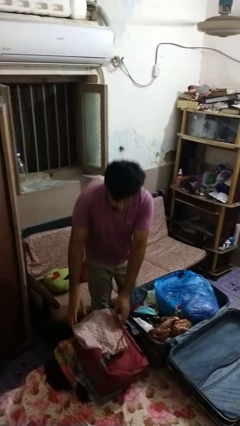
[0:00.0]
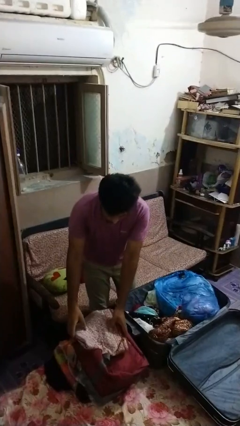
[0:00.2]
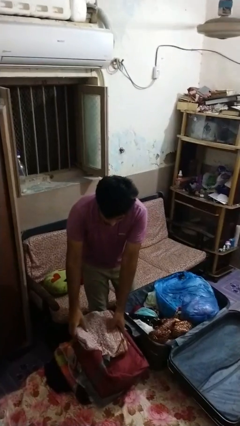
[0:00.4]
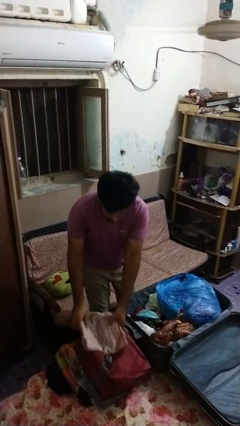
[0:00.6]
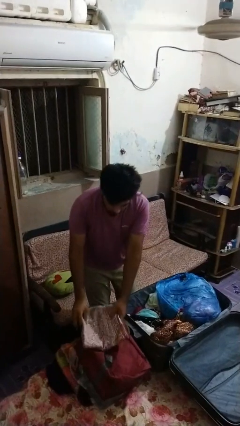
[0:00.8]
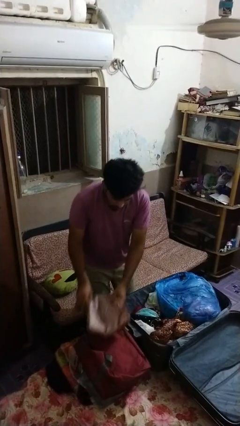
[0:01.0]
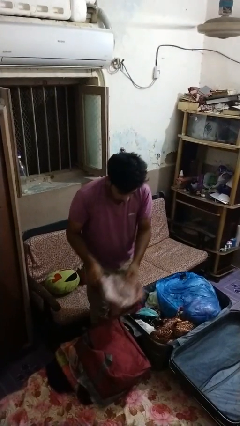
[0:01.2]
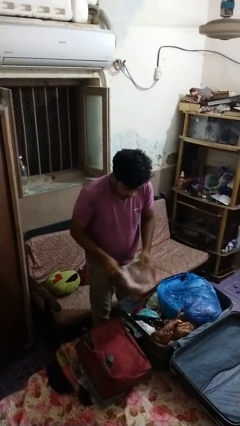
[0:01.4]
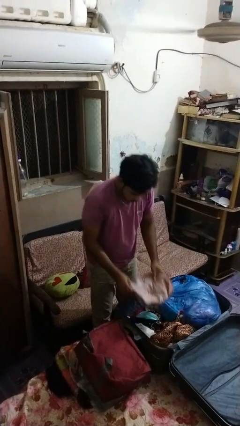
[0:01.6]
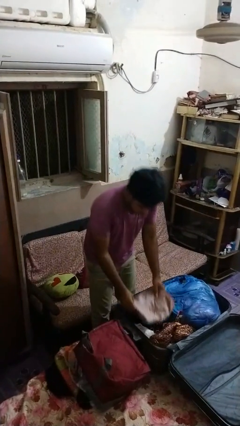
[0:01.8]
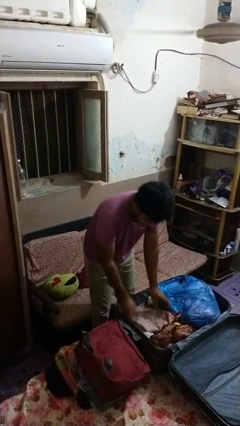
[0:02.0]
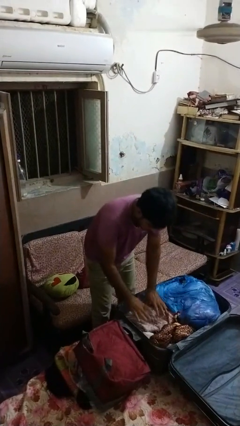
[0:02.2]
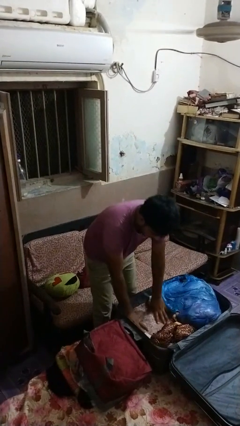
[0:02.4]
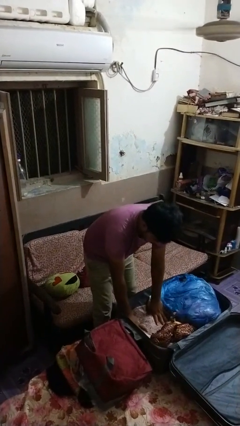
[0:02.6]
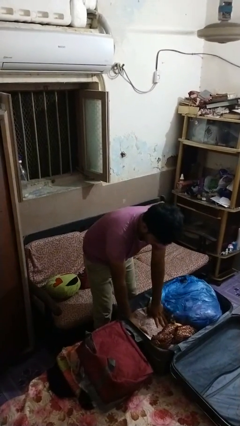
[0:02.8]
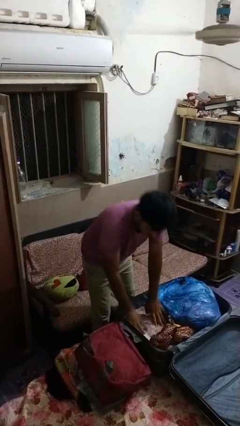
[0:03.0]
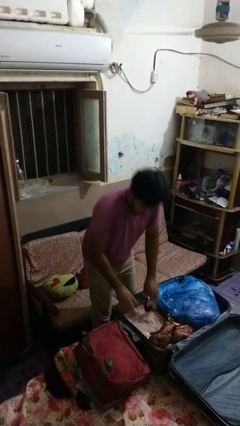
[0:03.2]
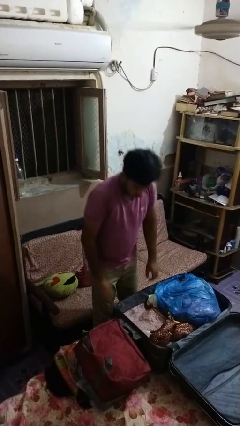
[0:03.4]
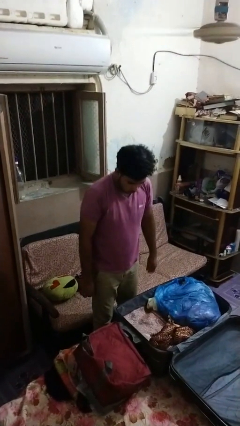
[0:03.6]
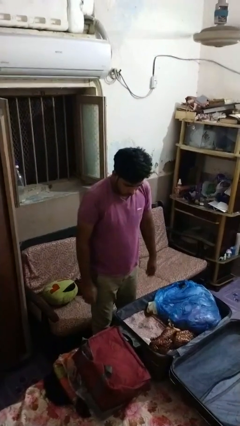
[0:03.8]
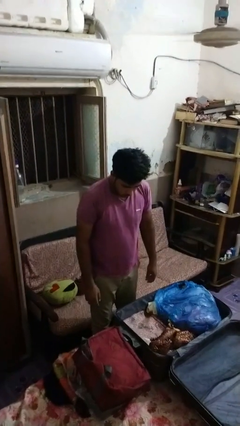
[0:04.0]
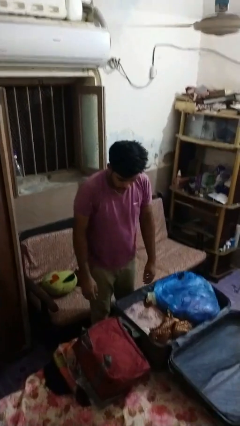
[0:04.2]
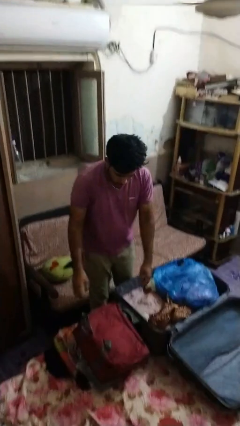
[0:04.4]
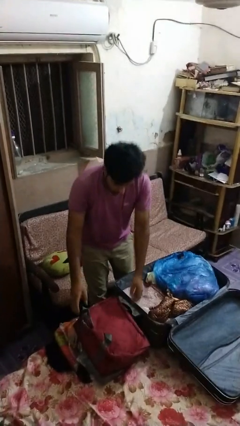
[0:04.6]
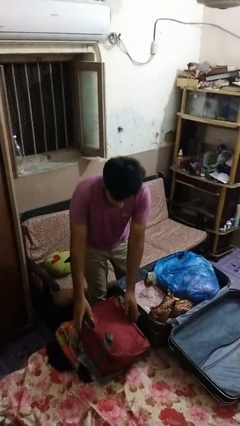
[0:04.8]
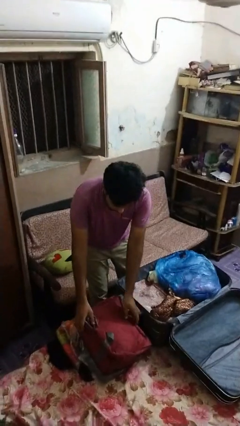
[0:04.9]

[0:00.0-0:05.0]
person loads clothes into suitcase

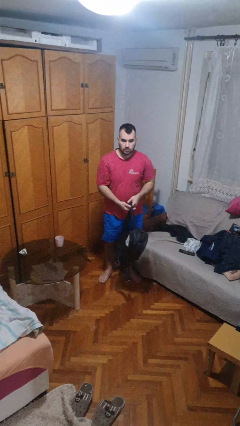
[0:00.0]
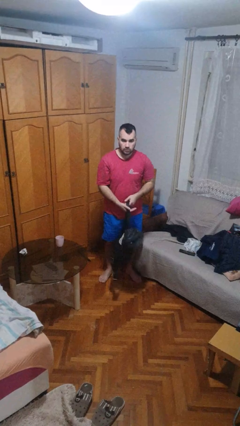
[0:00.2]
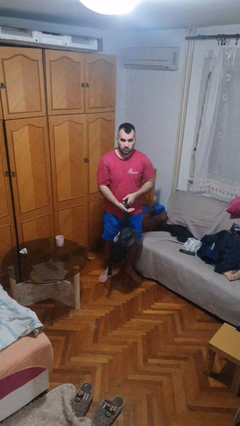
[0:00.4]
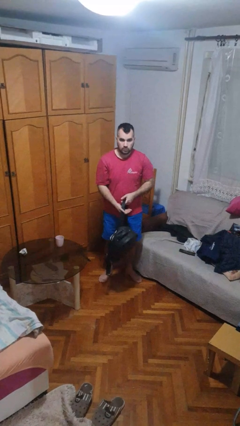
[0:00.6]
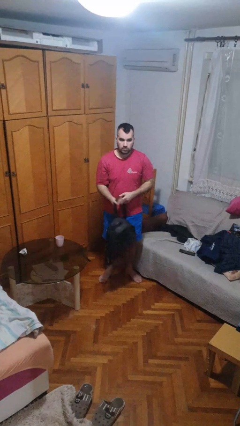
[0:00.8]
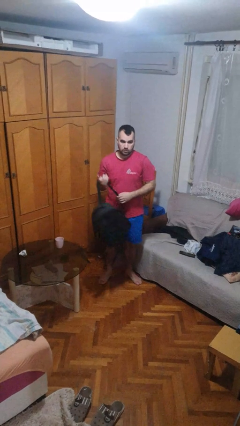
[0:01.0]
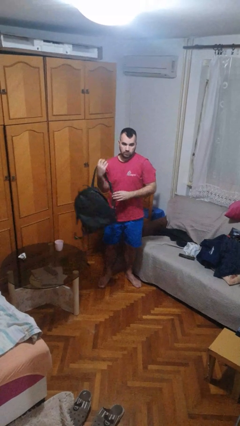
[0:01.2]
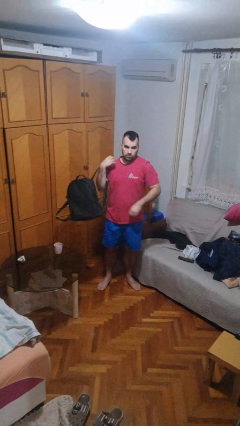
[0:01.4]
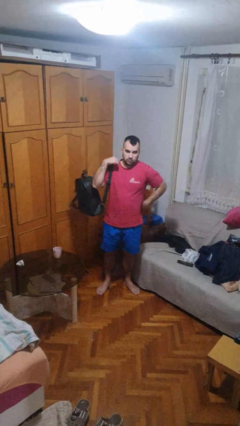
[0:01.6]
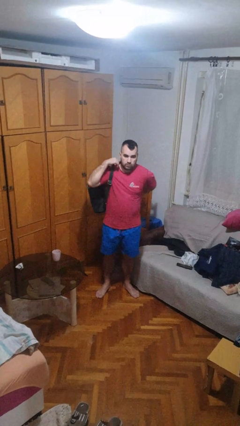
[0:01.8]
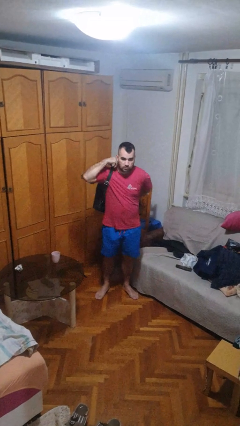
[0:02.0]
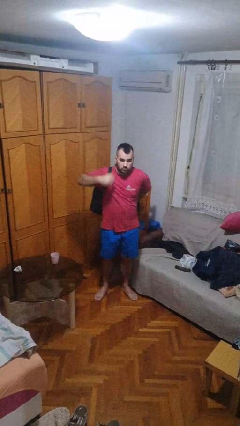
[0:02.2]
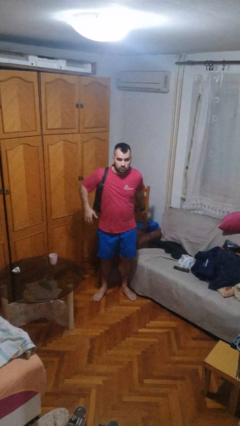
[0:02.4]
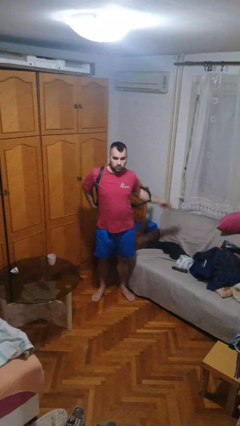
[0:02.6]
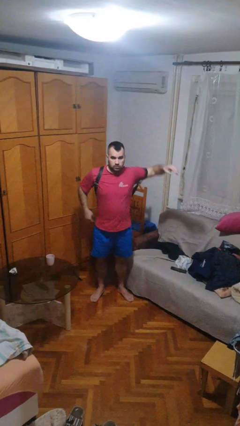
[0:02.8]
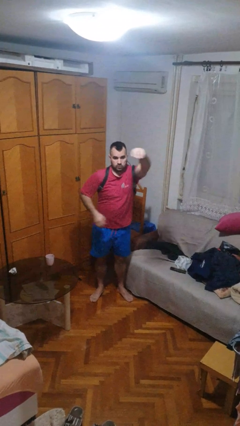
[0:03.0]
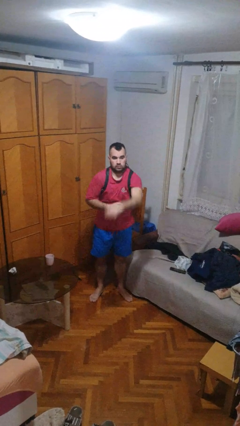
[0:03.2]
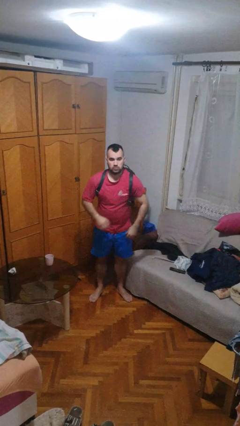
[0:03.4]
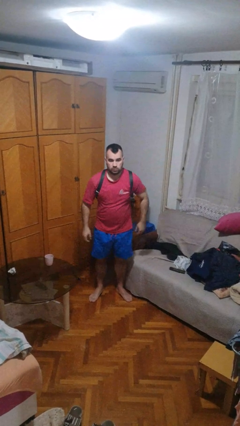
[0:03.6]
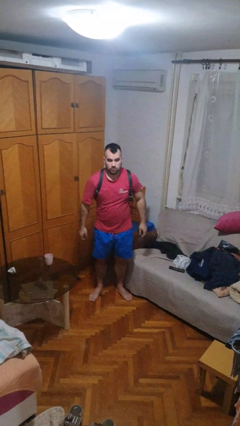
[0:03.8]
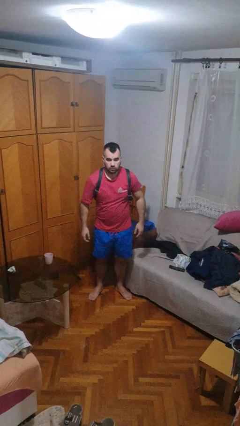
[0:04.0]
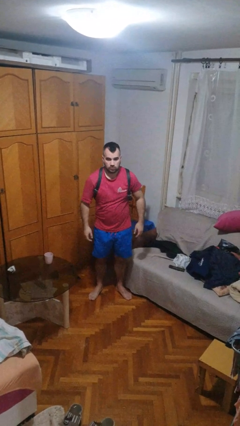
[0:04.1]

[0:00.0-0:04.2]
person puts on backpack

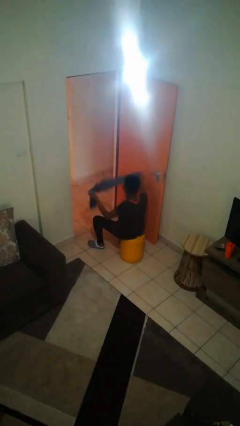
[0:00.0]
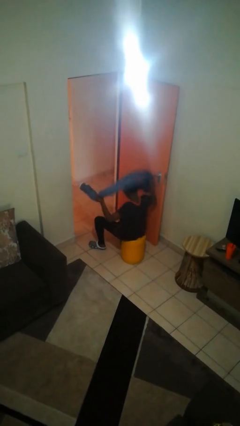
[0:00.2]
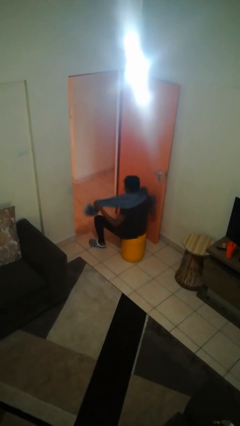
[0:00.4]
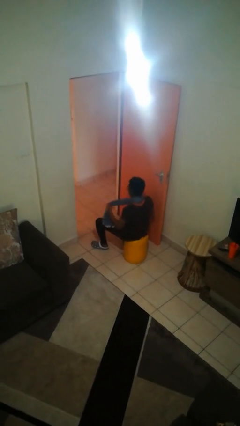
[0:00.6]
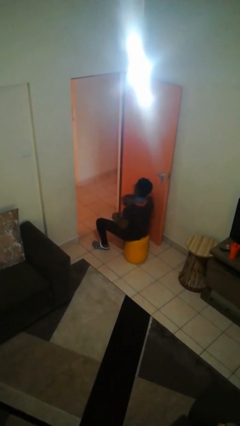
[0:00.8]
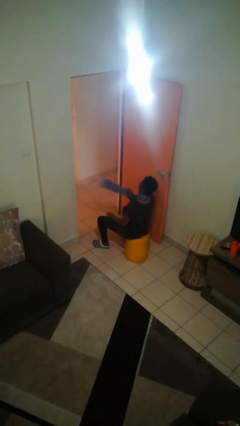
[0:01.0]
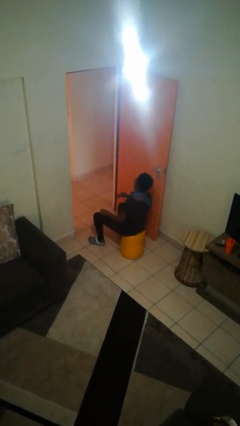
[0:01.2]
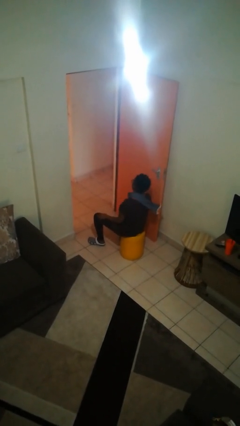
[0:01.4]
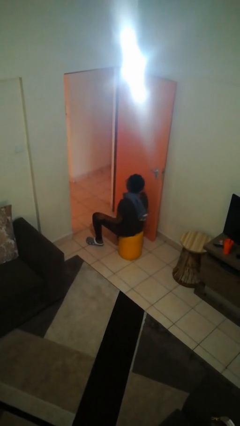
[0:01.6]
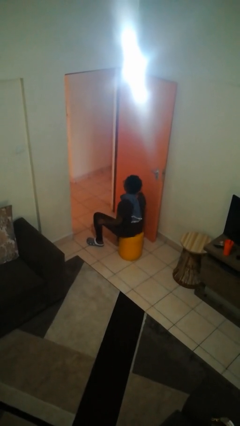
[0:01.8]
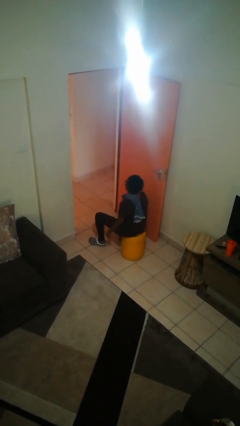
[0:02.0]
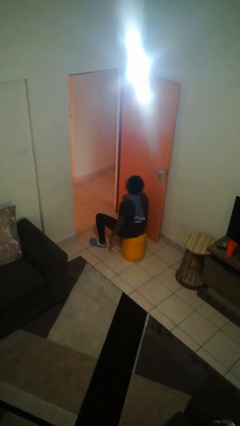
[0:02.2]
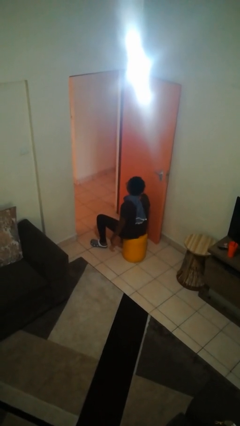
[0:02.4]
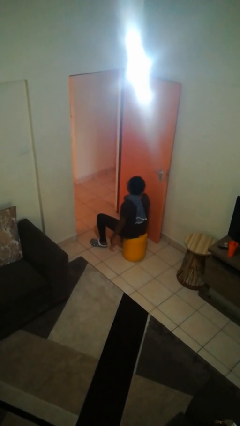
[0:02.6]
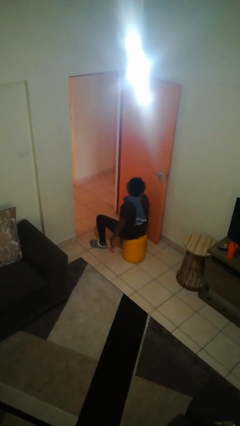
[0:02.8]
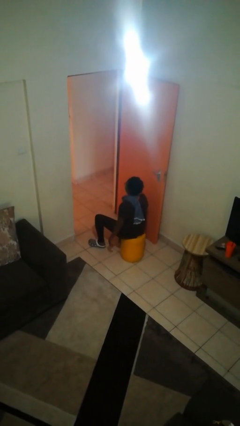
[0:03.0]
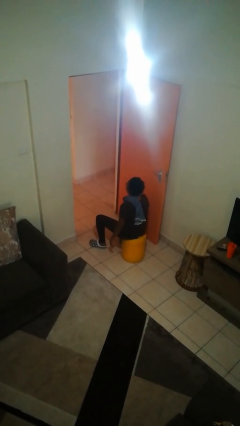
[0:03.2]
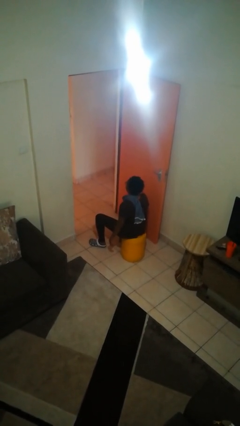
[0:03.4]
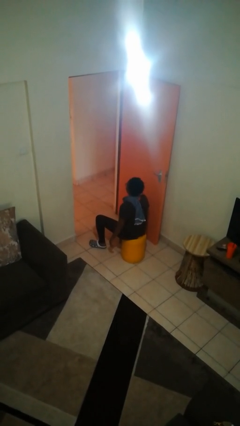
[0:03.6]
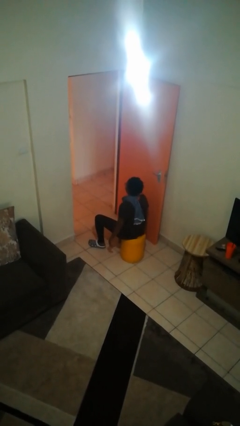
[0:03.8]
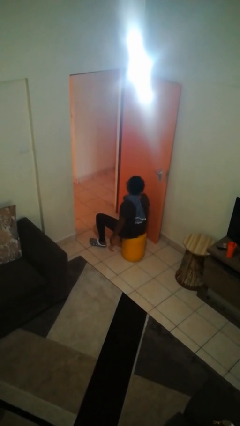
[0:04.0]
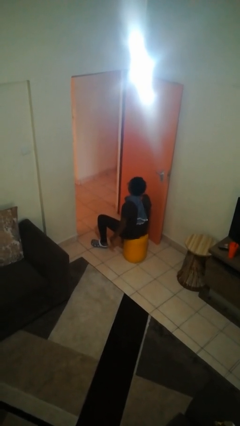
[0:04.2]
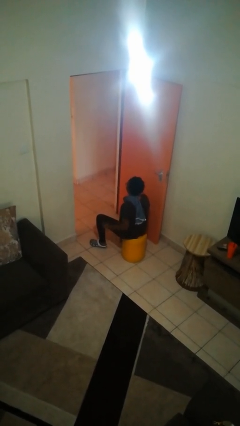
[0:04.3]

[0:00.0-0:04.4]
person puts on scarf

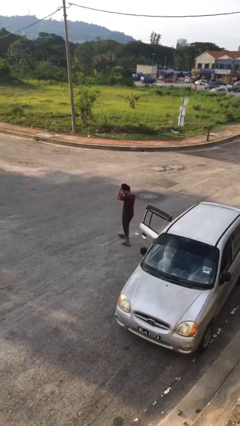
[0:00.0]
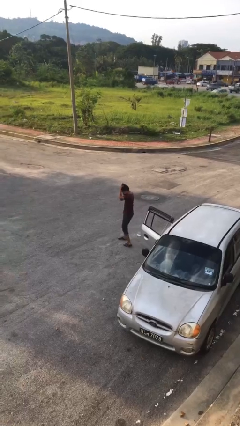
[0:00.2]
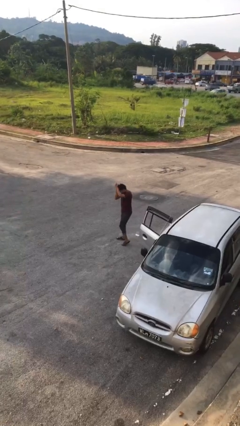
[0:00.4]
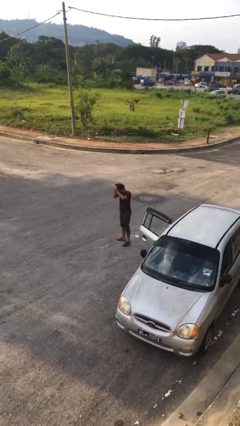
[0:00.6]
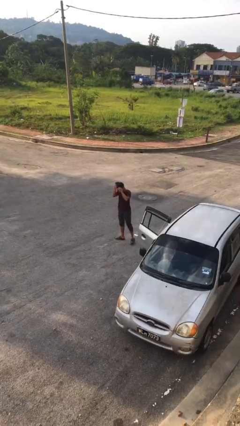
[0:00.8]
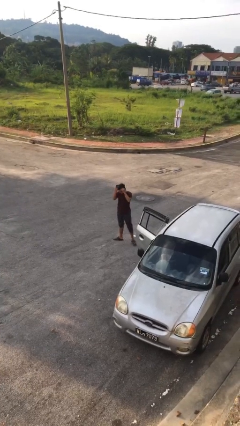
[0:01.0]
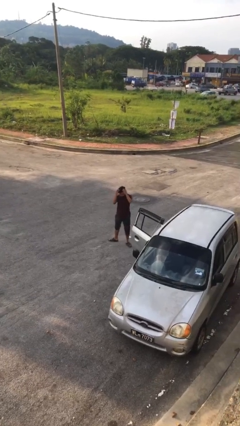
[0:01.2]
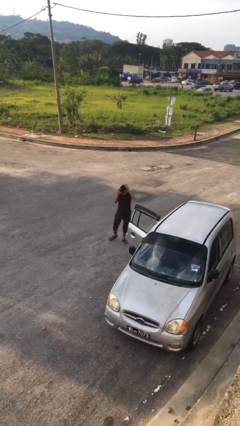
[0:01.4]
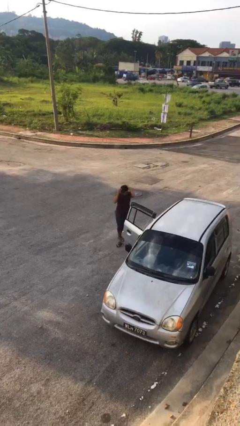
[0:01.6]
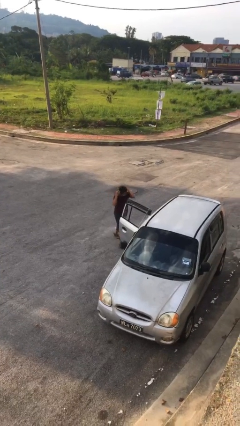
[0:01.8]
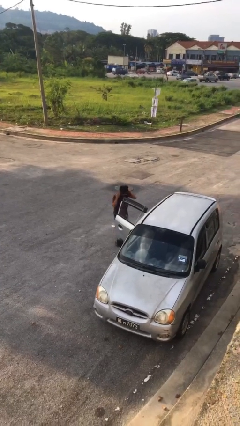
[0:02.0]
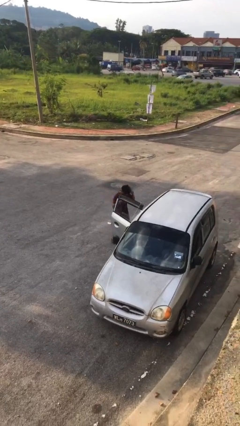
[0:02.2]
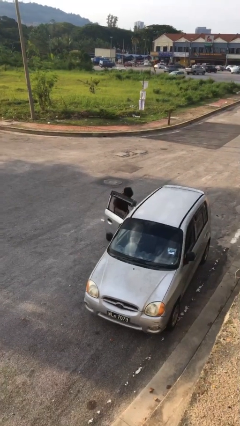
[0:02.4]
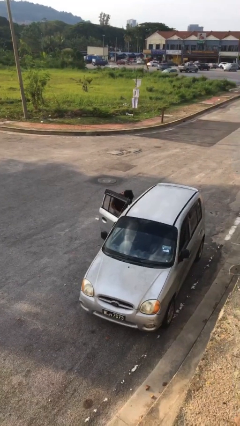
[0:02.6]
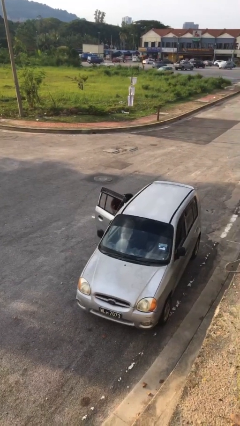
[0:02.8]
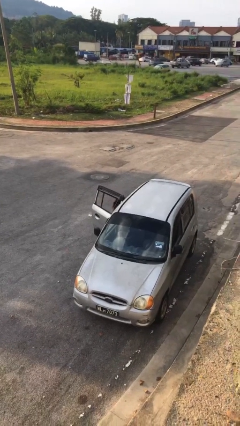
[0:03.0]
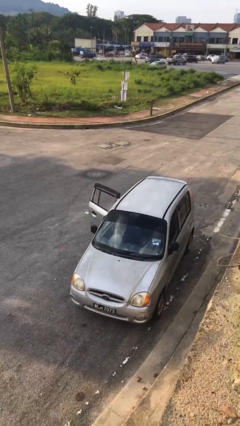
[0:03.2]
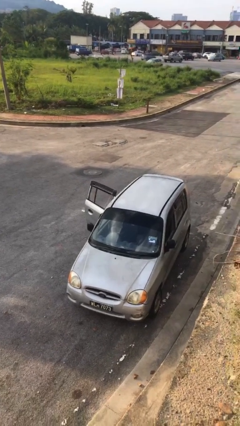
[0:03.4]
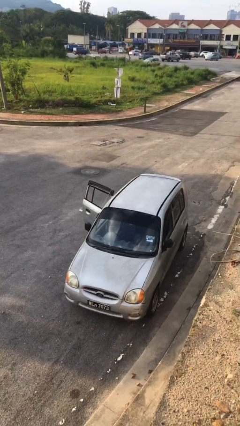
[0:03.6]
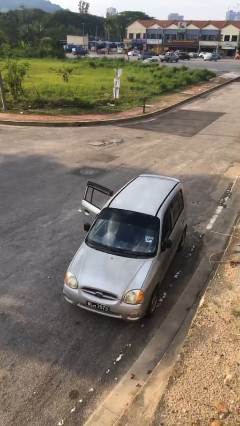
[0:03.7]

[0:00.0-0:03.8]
person enters car
